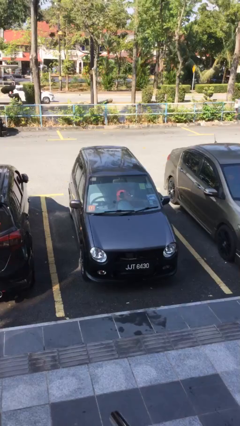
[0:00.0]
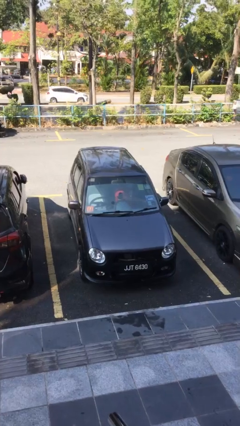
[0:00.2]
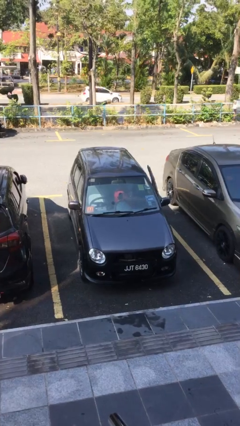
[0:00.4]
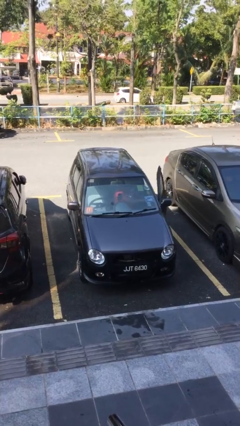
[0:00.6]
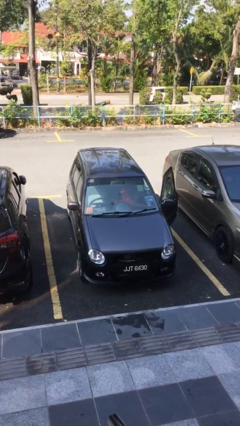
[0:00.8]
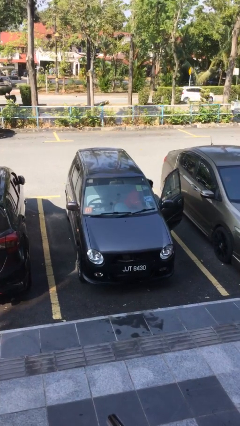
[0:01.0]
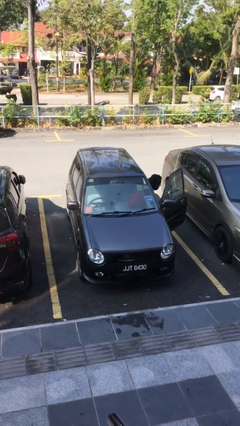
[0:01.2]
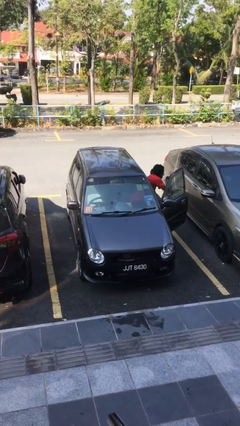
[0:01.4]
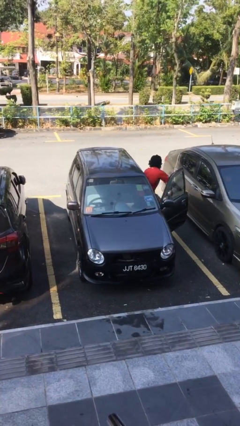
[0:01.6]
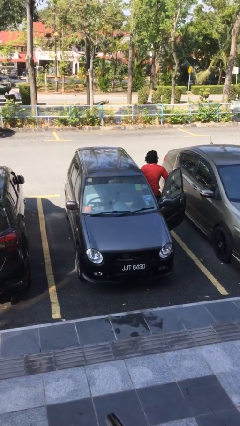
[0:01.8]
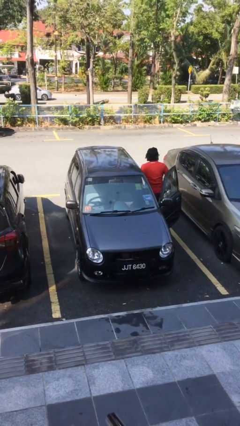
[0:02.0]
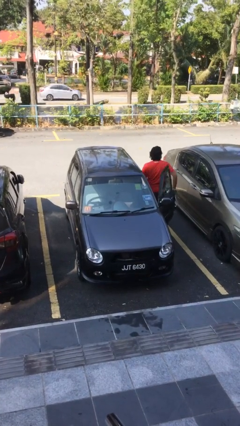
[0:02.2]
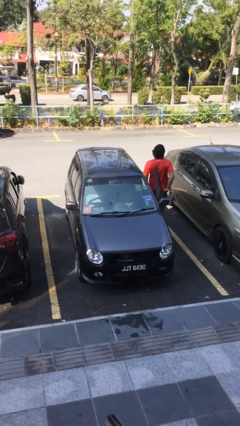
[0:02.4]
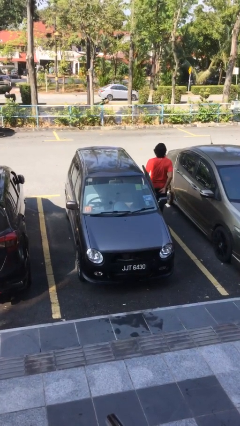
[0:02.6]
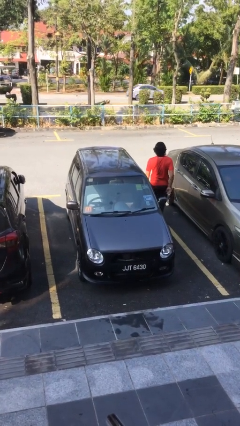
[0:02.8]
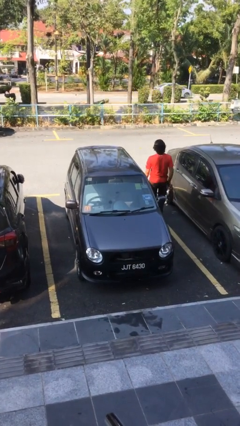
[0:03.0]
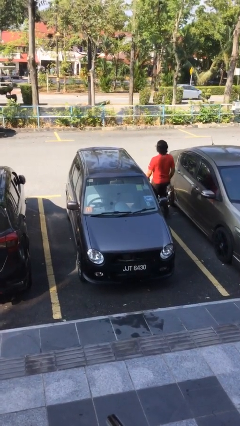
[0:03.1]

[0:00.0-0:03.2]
car drops off person

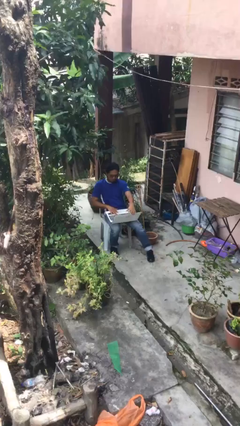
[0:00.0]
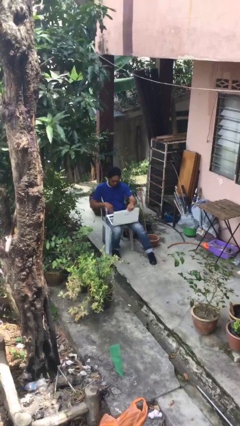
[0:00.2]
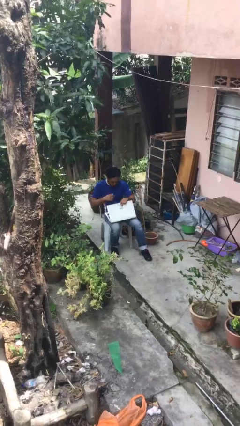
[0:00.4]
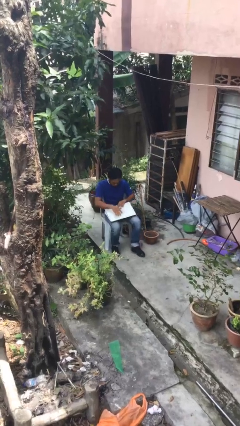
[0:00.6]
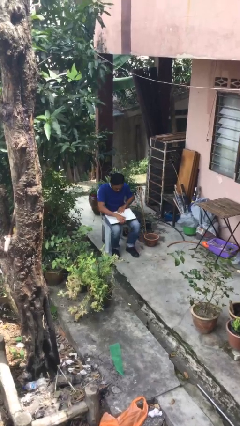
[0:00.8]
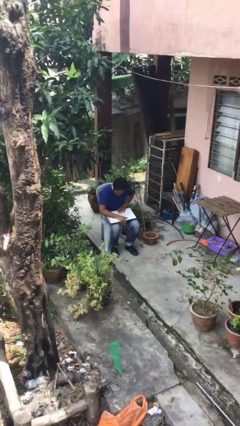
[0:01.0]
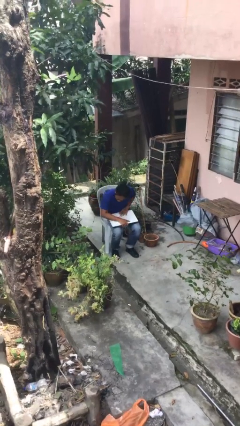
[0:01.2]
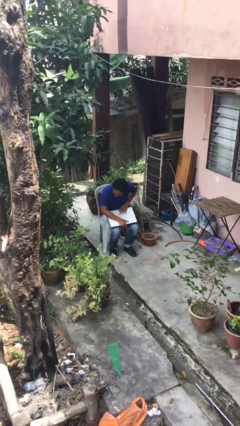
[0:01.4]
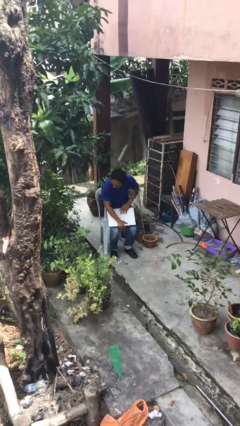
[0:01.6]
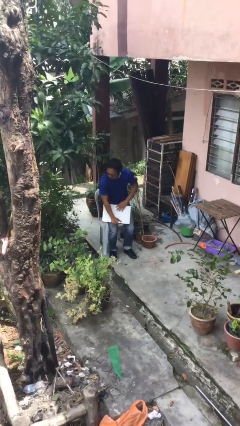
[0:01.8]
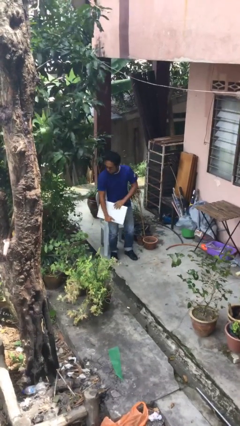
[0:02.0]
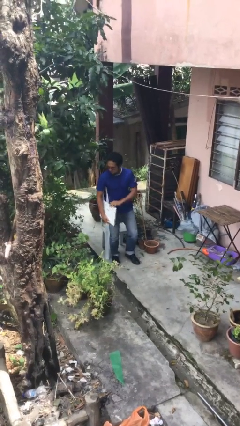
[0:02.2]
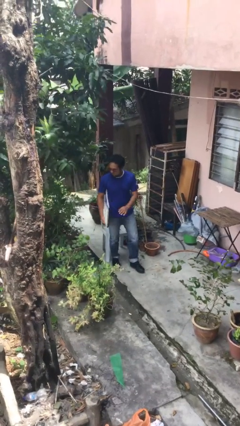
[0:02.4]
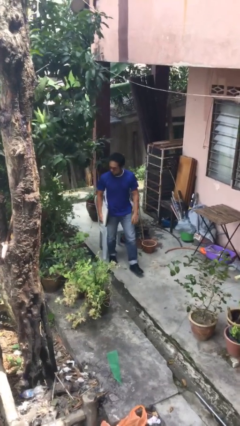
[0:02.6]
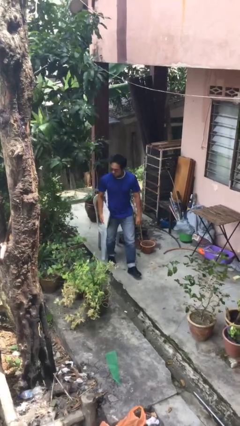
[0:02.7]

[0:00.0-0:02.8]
person stands up

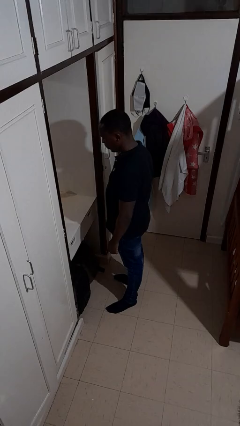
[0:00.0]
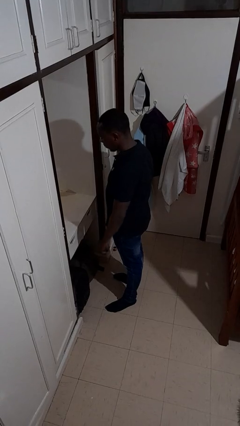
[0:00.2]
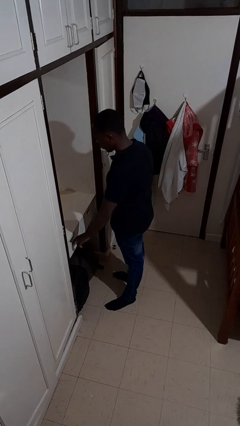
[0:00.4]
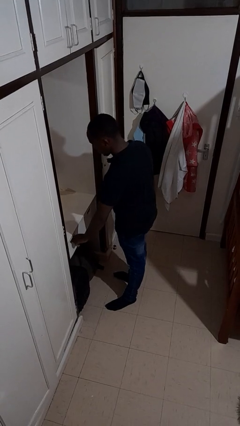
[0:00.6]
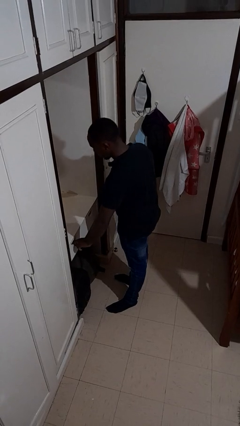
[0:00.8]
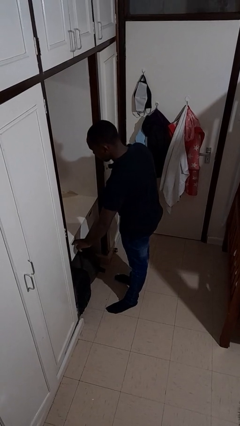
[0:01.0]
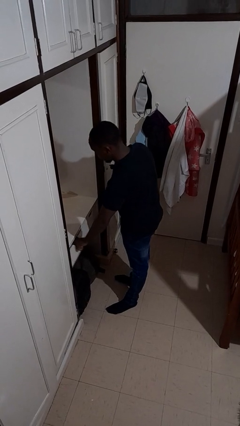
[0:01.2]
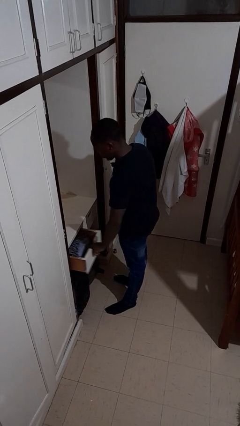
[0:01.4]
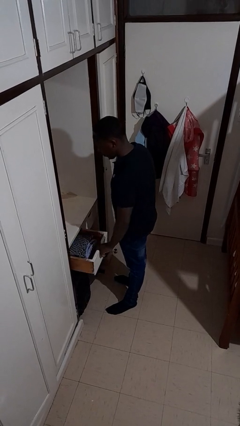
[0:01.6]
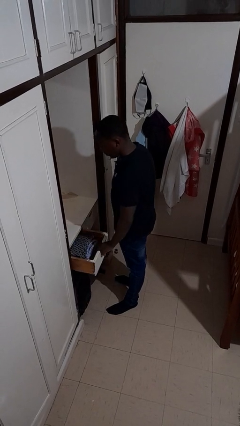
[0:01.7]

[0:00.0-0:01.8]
person opens dresser drawer

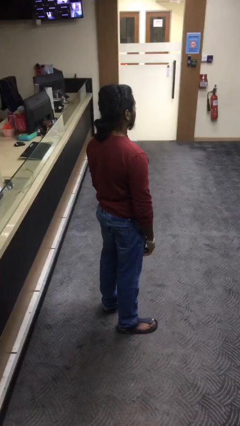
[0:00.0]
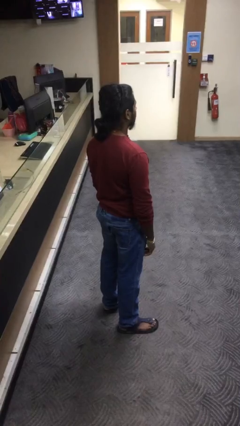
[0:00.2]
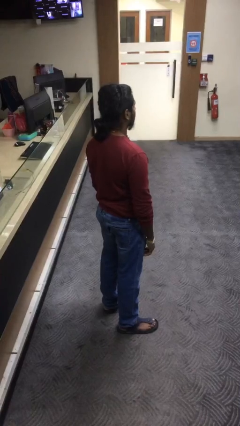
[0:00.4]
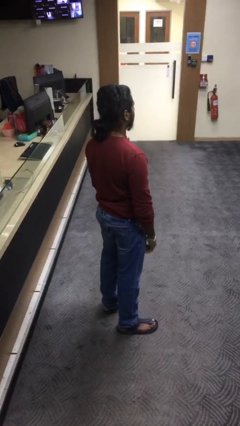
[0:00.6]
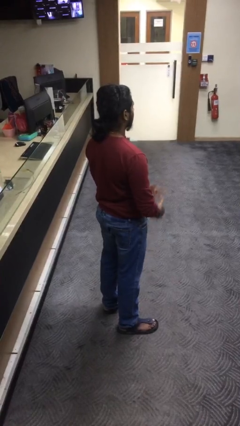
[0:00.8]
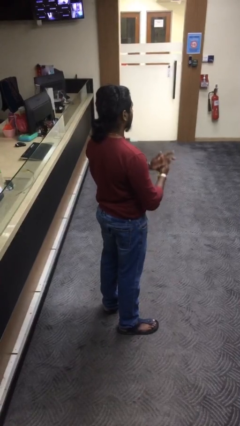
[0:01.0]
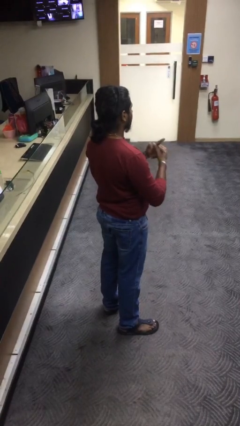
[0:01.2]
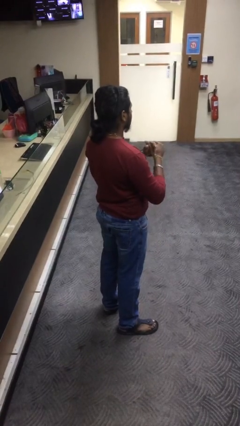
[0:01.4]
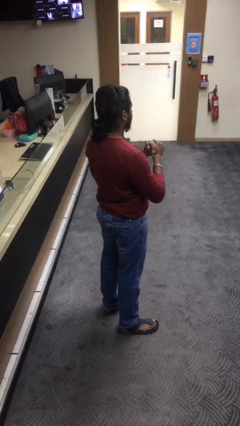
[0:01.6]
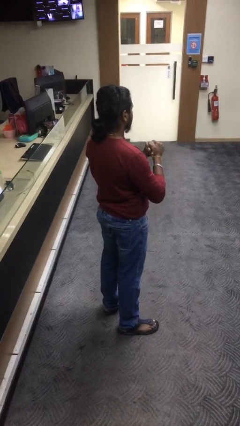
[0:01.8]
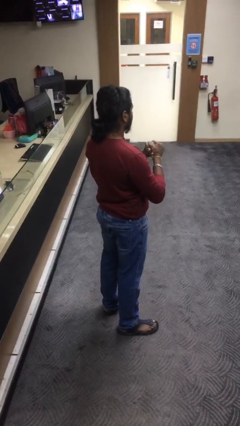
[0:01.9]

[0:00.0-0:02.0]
person cracks knuckles

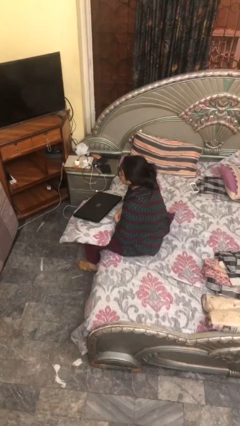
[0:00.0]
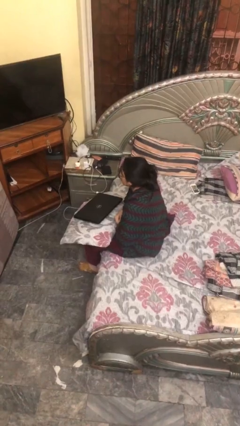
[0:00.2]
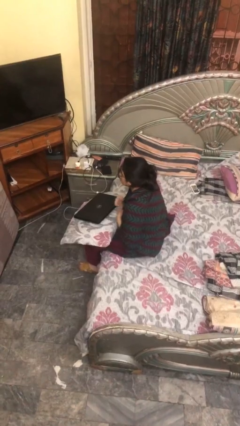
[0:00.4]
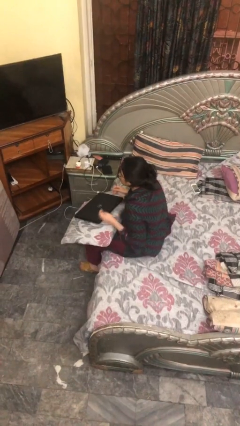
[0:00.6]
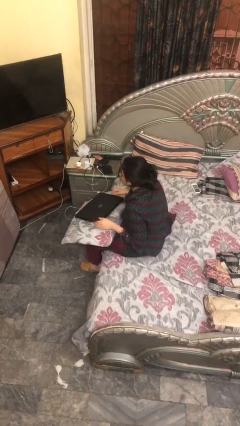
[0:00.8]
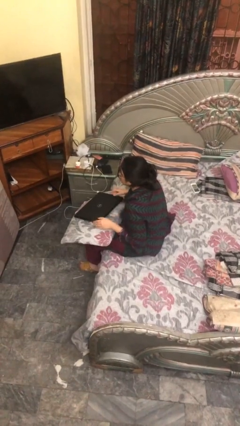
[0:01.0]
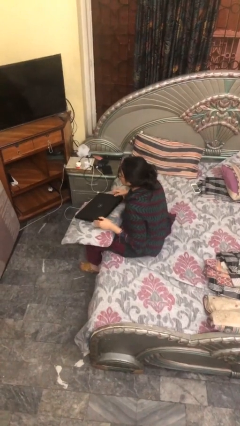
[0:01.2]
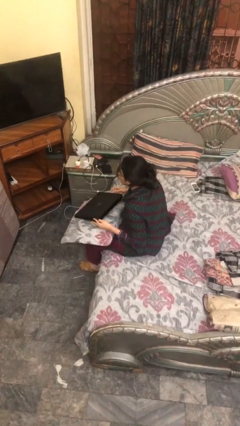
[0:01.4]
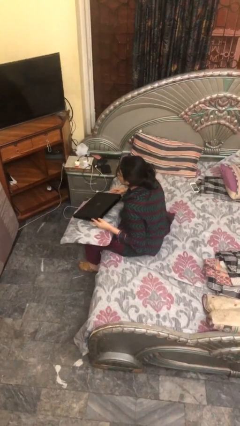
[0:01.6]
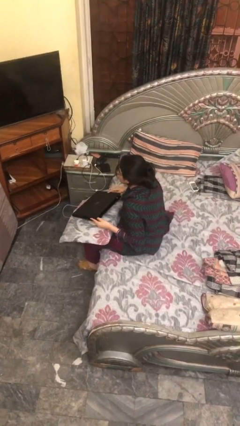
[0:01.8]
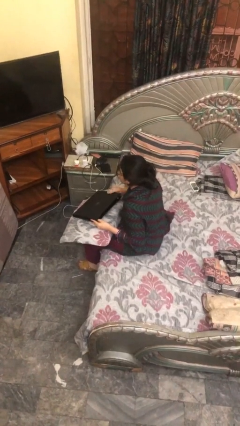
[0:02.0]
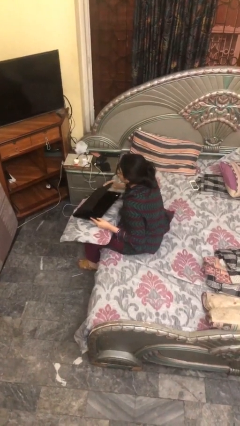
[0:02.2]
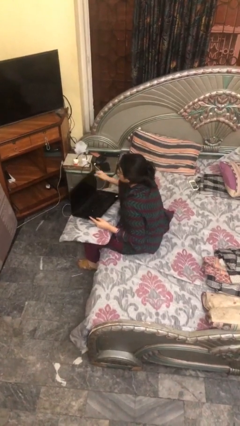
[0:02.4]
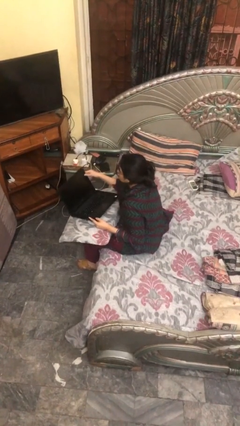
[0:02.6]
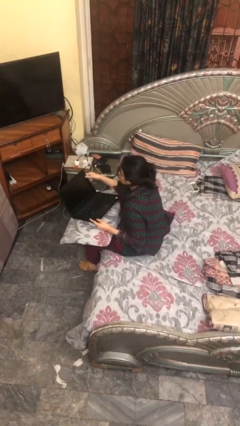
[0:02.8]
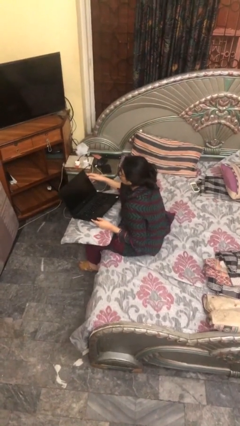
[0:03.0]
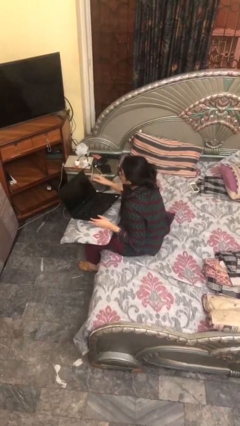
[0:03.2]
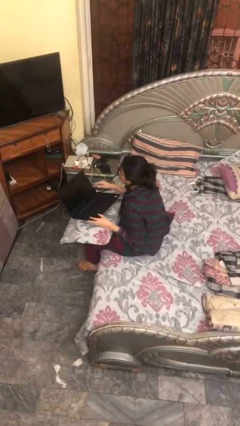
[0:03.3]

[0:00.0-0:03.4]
person opens laptop

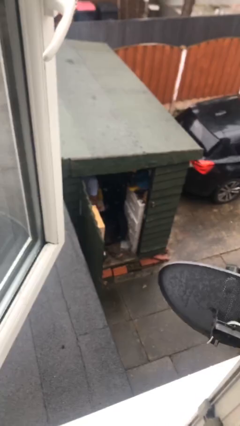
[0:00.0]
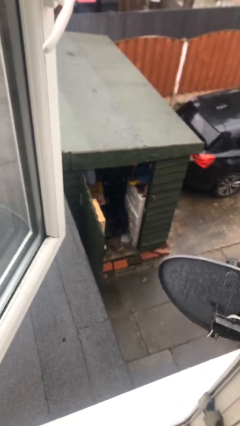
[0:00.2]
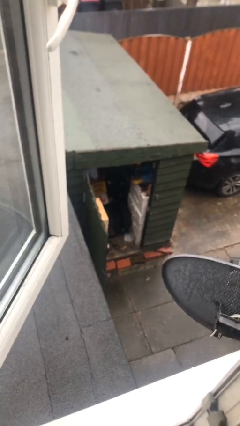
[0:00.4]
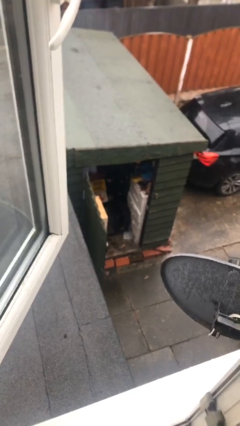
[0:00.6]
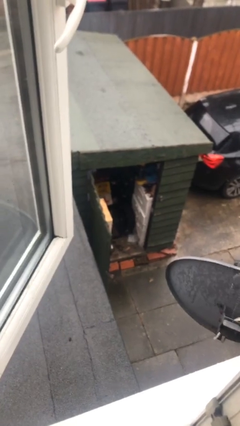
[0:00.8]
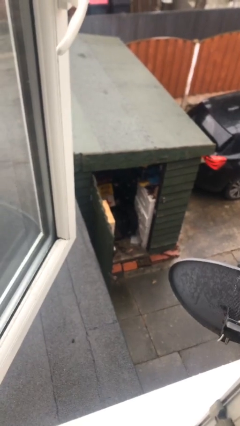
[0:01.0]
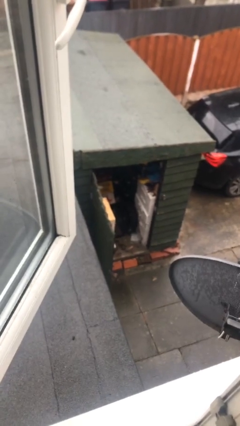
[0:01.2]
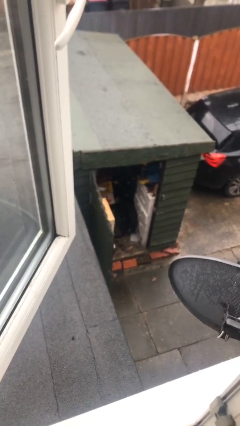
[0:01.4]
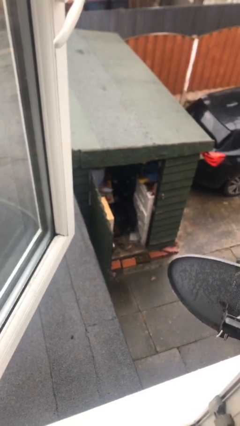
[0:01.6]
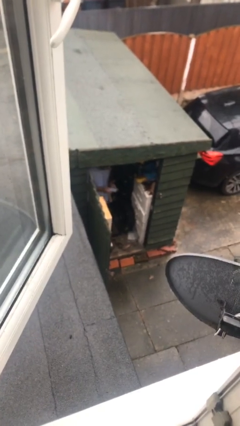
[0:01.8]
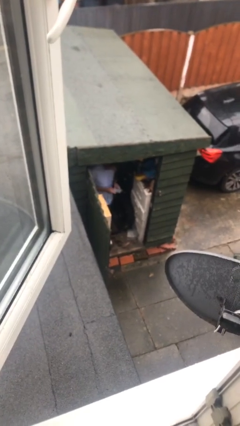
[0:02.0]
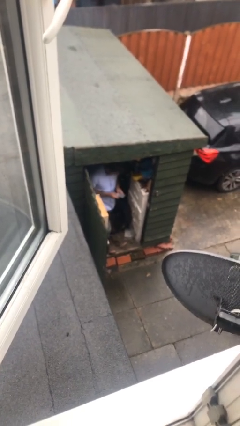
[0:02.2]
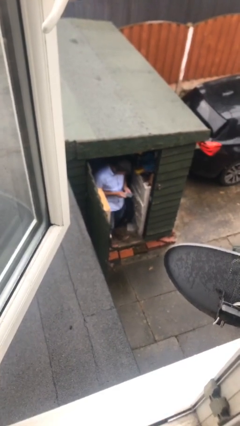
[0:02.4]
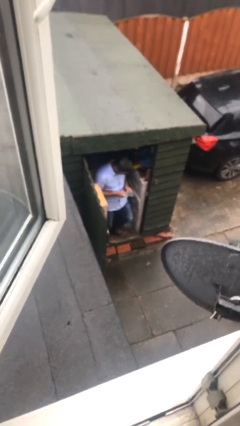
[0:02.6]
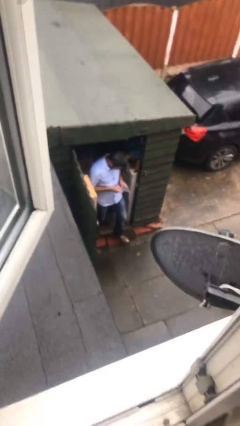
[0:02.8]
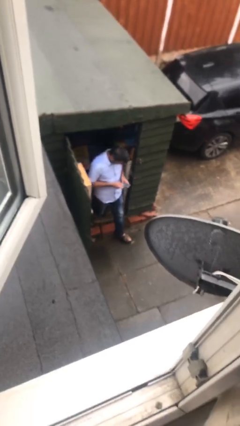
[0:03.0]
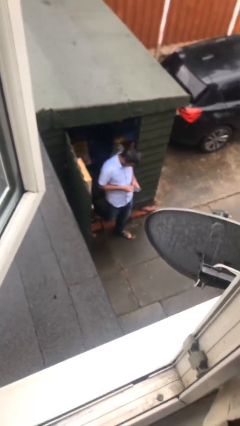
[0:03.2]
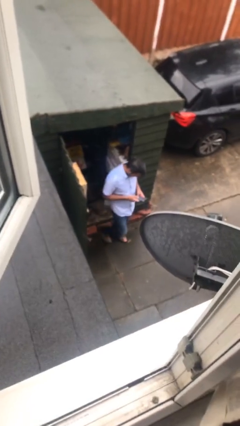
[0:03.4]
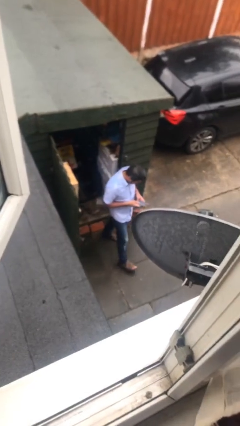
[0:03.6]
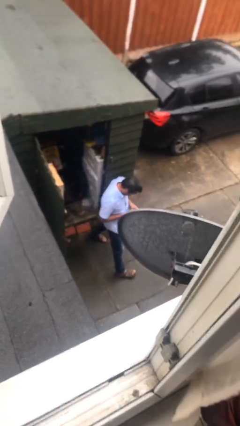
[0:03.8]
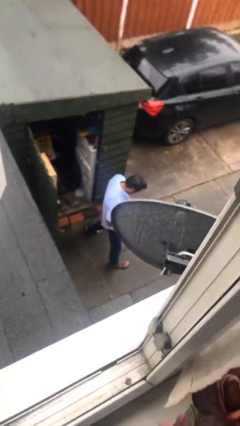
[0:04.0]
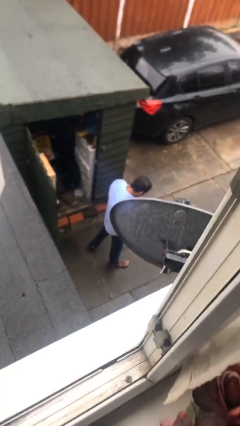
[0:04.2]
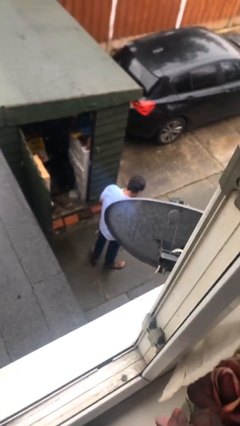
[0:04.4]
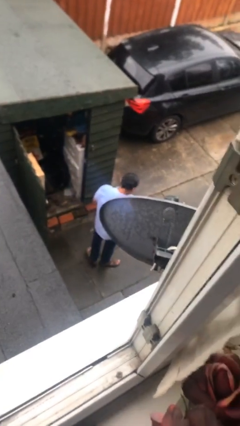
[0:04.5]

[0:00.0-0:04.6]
person enters scene through structure
